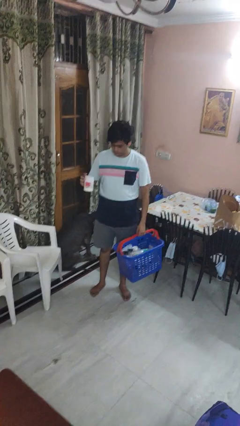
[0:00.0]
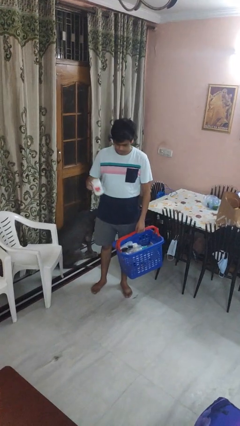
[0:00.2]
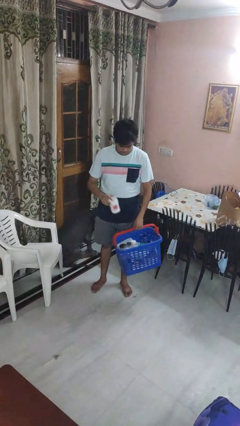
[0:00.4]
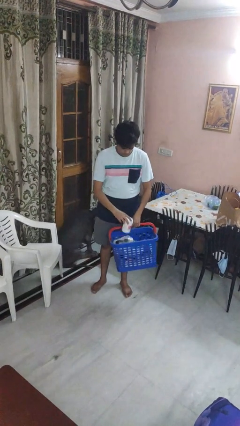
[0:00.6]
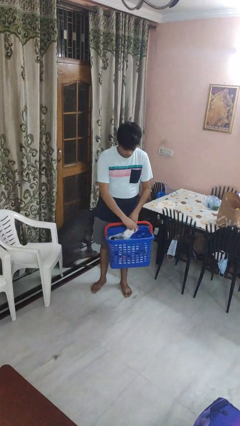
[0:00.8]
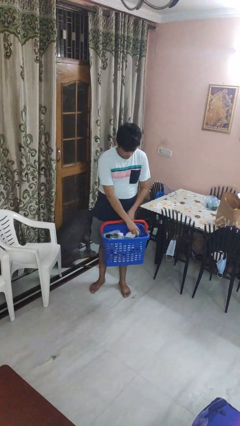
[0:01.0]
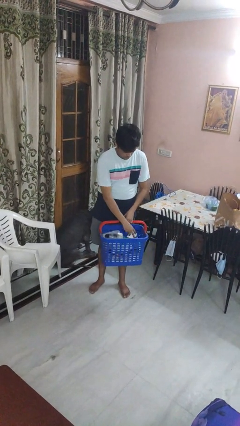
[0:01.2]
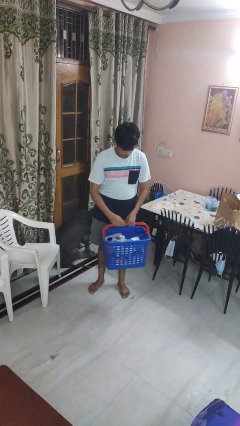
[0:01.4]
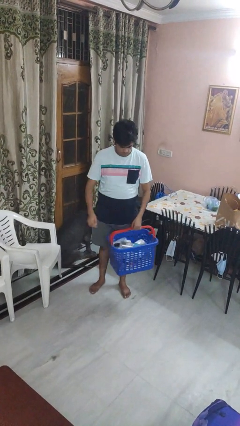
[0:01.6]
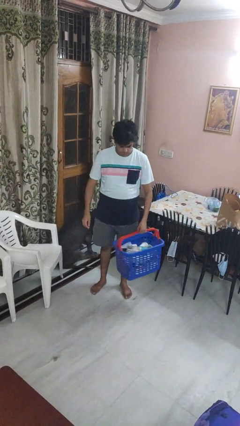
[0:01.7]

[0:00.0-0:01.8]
person puts object into basket

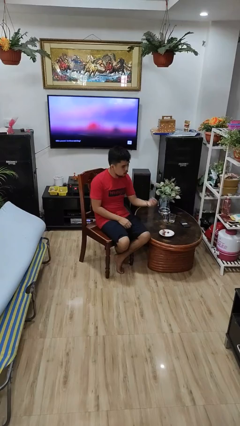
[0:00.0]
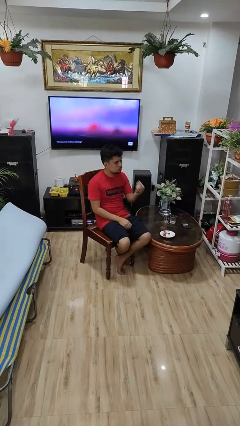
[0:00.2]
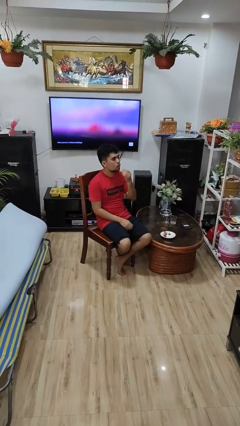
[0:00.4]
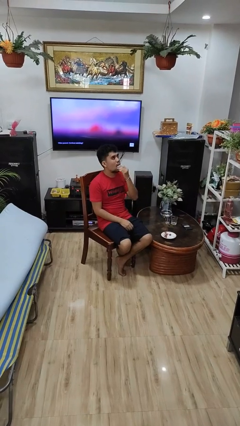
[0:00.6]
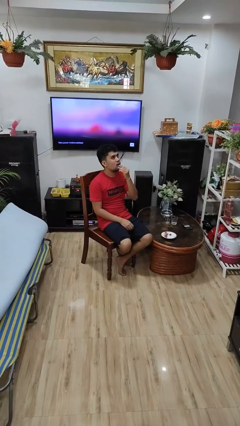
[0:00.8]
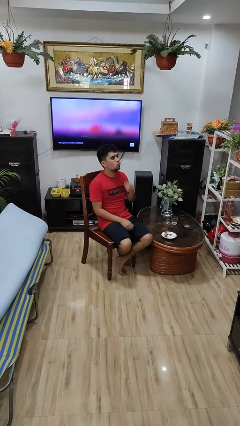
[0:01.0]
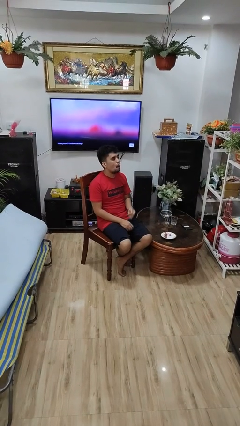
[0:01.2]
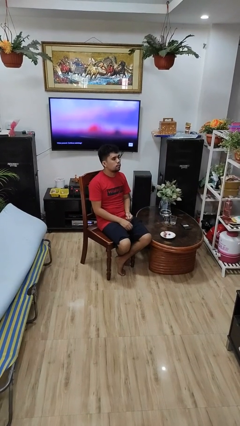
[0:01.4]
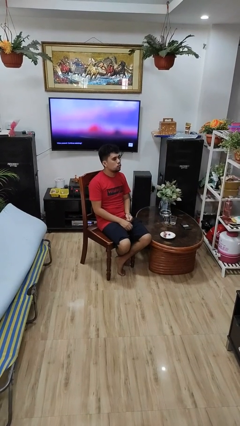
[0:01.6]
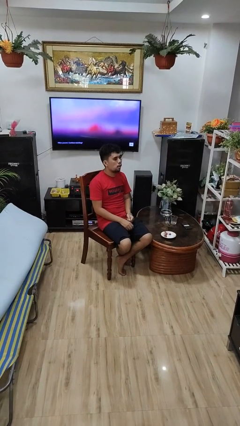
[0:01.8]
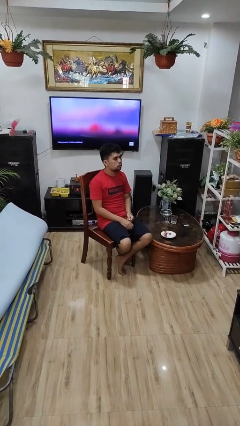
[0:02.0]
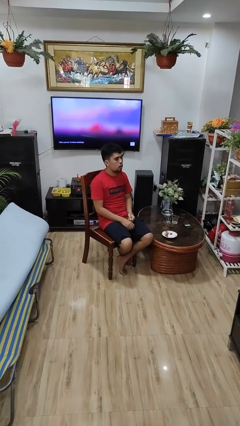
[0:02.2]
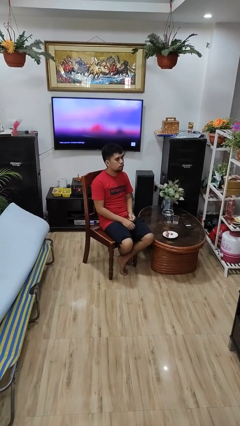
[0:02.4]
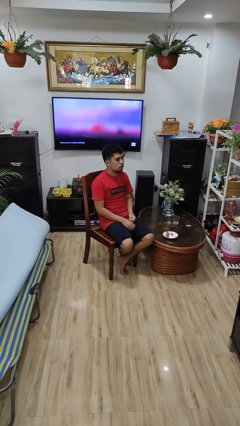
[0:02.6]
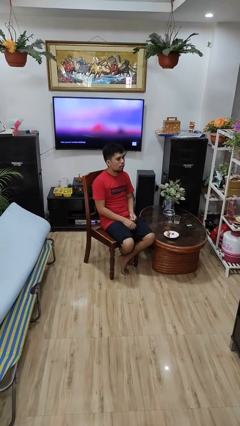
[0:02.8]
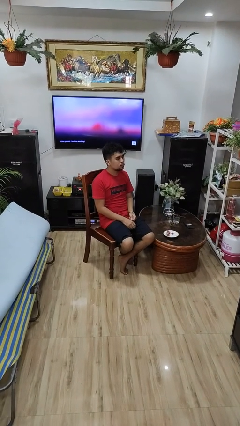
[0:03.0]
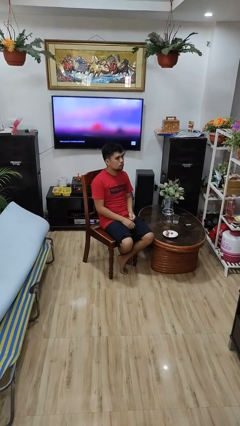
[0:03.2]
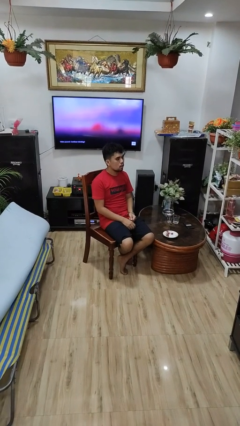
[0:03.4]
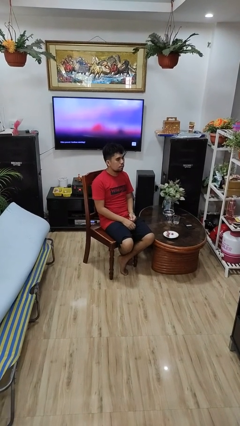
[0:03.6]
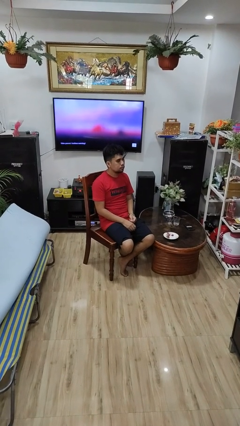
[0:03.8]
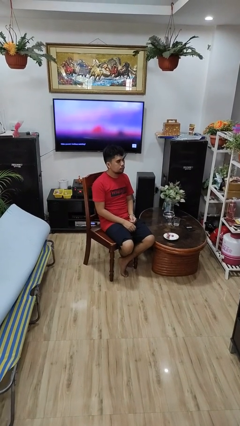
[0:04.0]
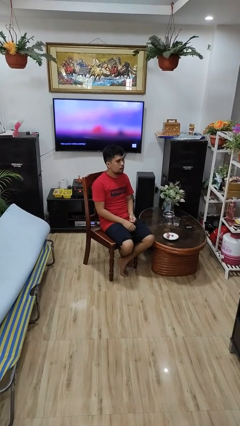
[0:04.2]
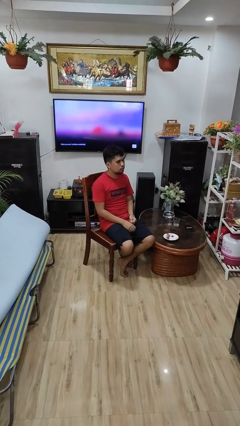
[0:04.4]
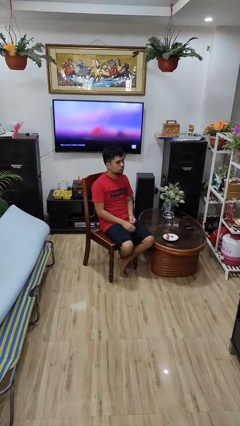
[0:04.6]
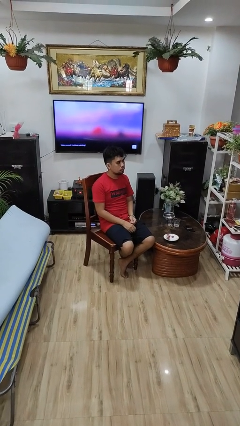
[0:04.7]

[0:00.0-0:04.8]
person eats with hands

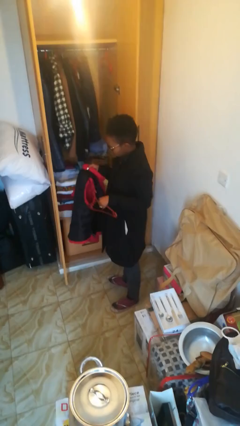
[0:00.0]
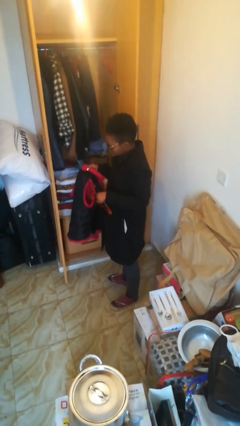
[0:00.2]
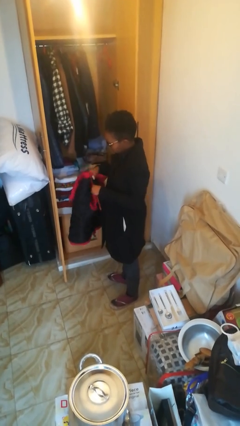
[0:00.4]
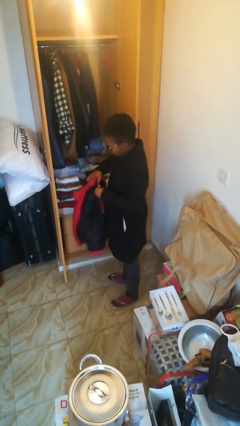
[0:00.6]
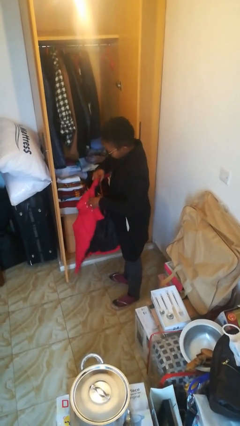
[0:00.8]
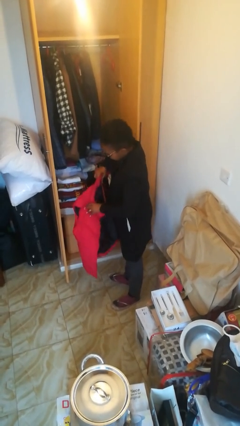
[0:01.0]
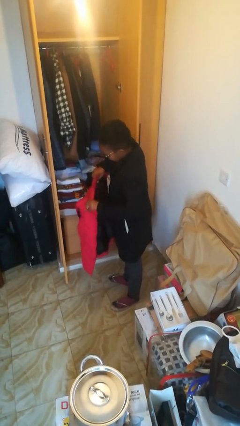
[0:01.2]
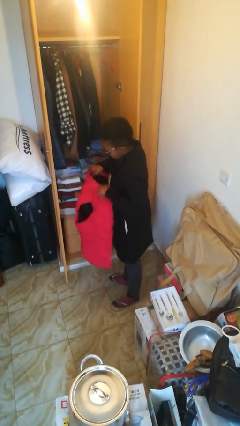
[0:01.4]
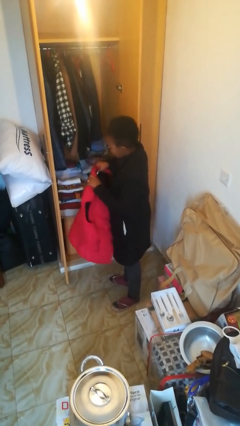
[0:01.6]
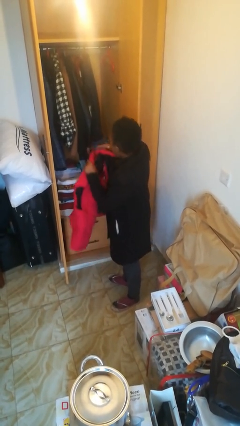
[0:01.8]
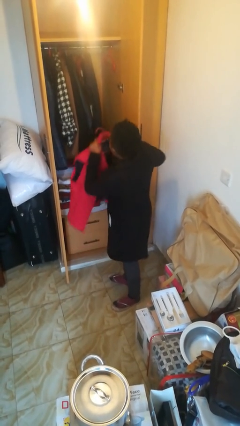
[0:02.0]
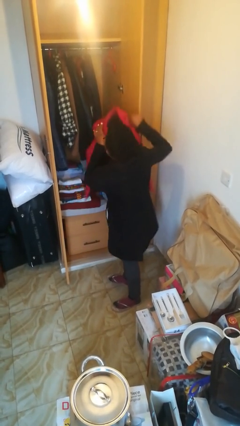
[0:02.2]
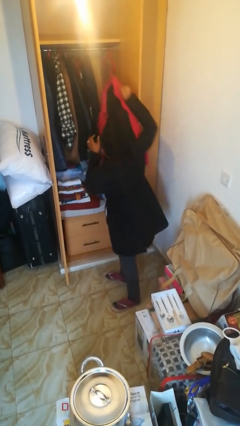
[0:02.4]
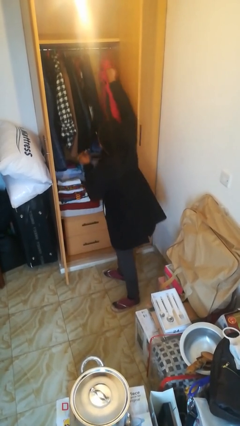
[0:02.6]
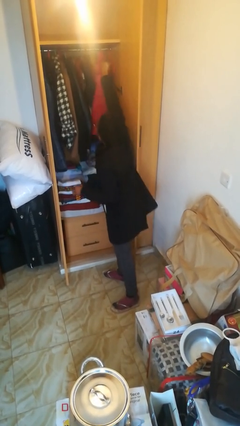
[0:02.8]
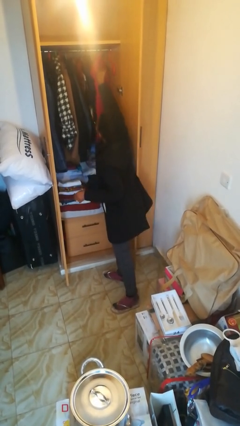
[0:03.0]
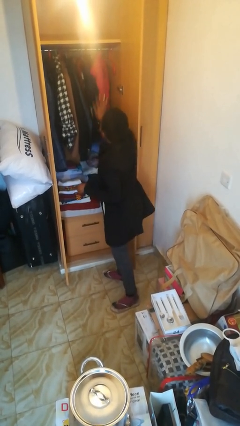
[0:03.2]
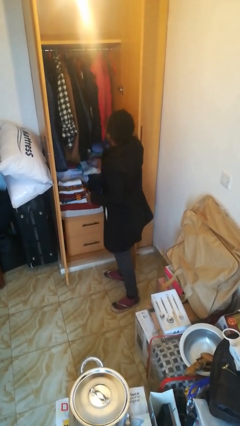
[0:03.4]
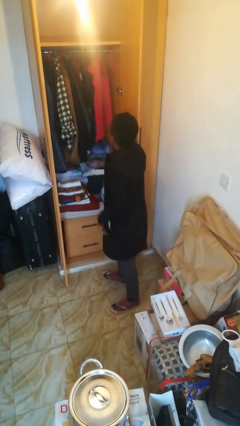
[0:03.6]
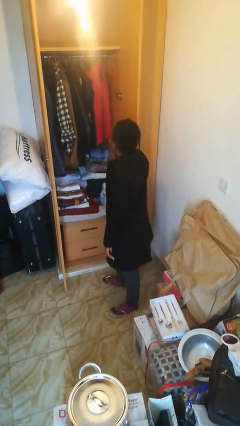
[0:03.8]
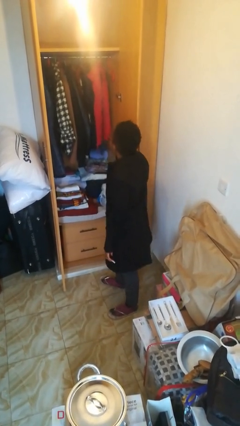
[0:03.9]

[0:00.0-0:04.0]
person puts clothes into closet

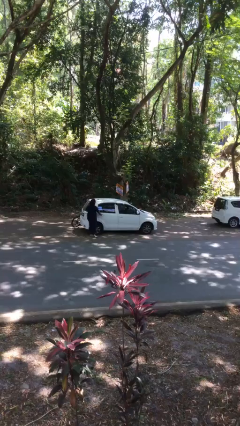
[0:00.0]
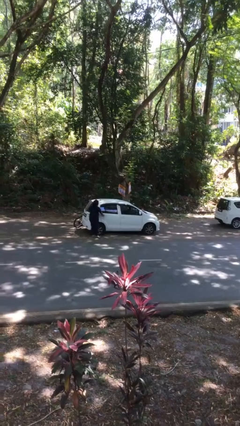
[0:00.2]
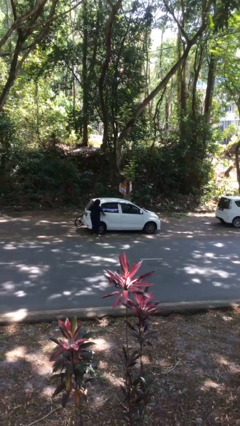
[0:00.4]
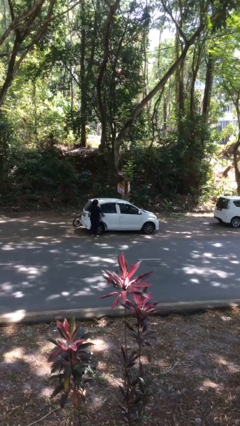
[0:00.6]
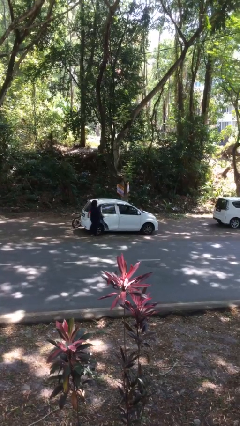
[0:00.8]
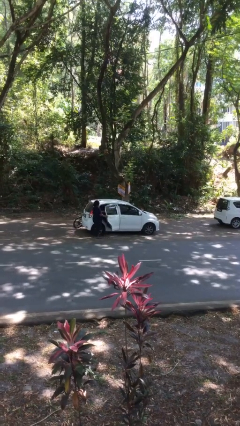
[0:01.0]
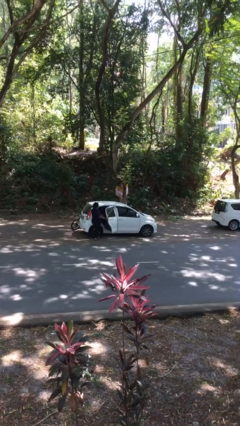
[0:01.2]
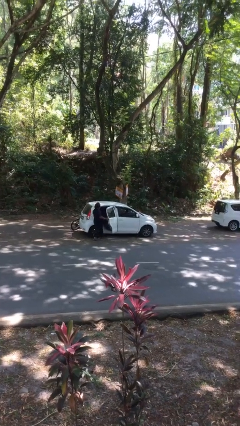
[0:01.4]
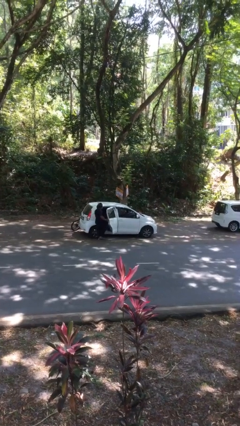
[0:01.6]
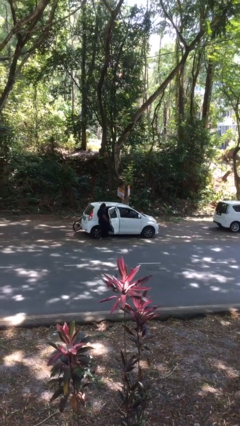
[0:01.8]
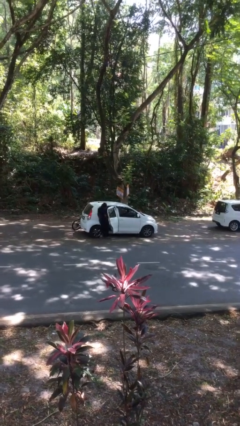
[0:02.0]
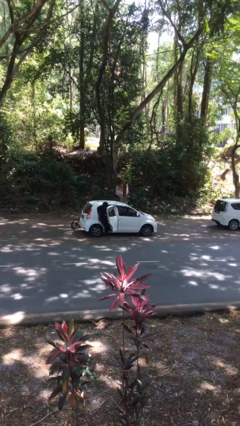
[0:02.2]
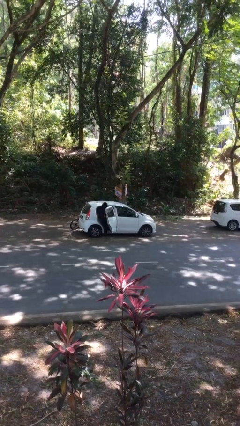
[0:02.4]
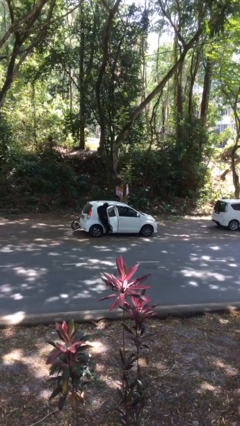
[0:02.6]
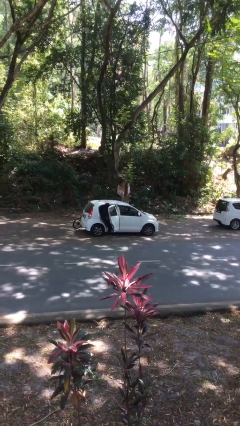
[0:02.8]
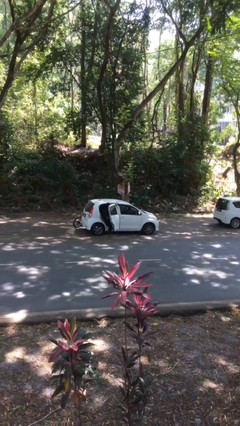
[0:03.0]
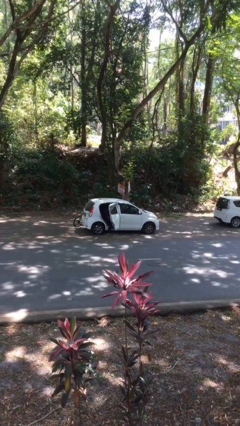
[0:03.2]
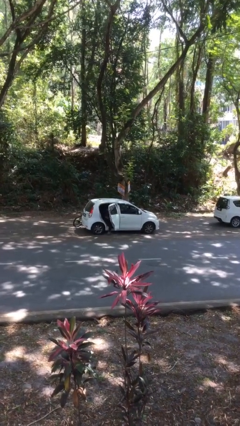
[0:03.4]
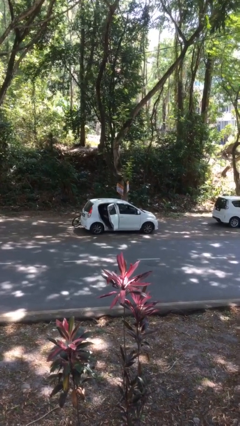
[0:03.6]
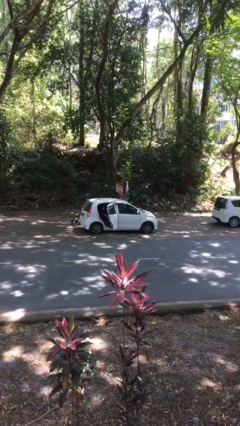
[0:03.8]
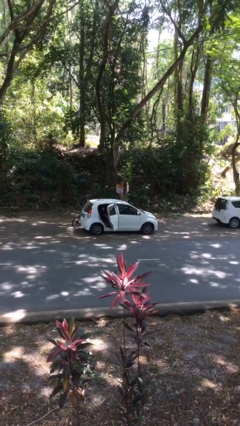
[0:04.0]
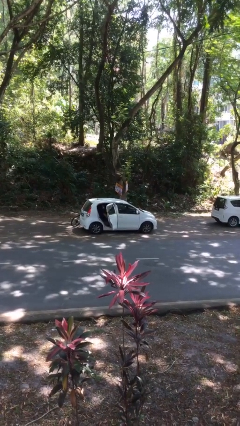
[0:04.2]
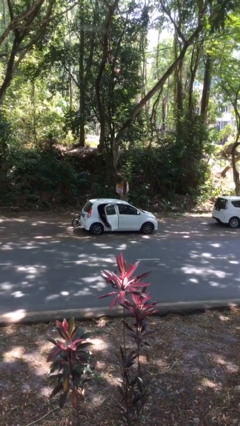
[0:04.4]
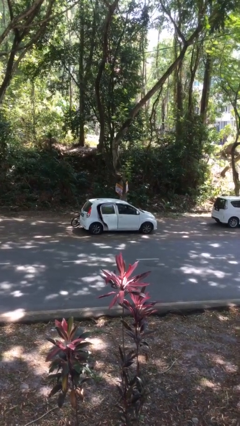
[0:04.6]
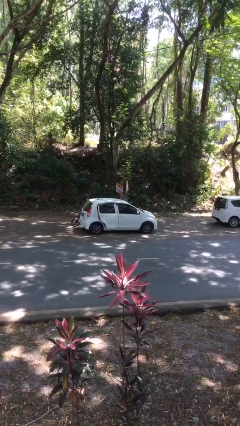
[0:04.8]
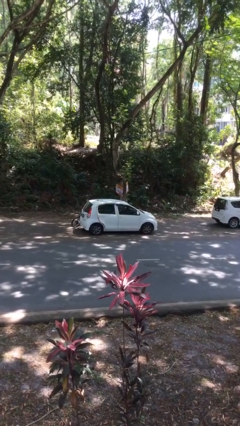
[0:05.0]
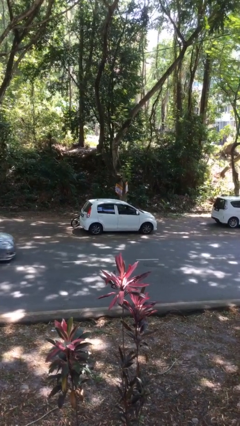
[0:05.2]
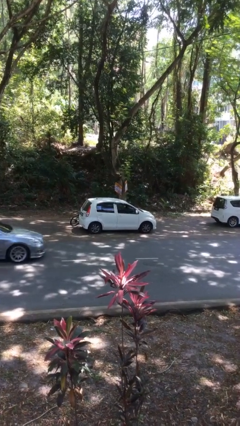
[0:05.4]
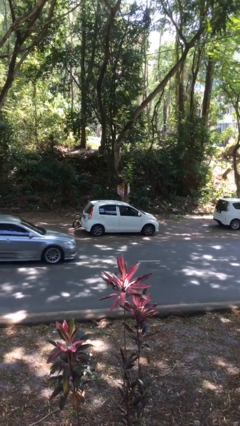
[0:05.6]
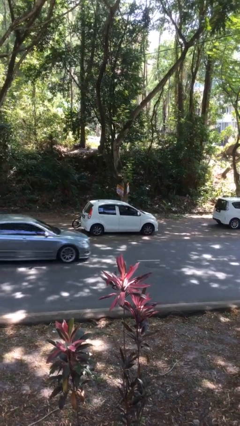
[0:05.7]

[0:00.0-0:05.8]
car picks up person

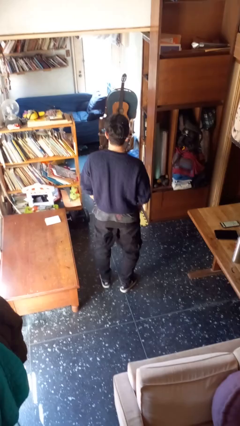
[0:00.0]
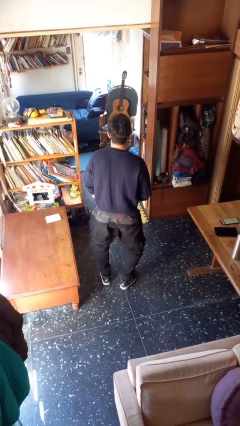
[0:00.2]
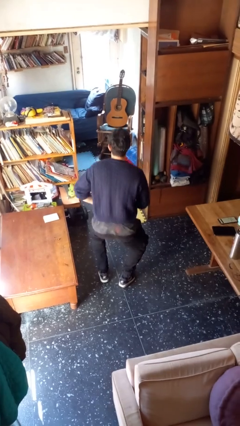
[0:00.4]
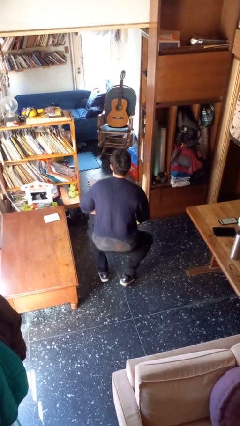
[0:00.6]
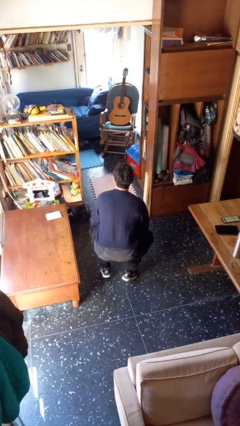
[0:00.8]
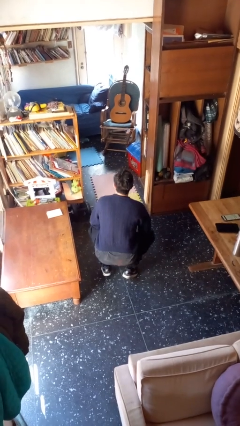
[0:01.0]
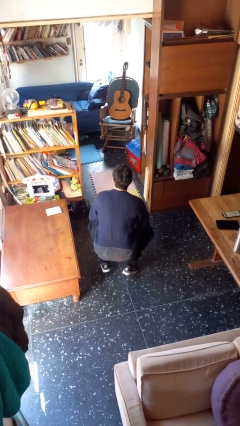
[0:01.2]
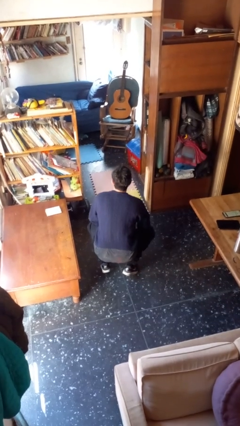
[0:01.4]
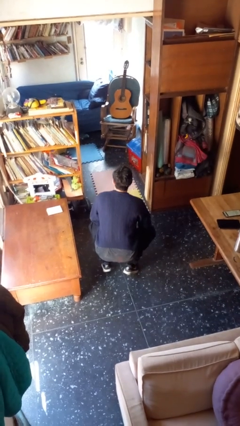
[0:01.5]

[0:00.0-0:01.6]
person squats
